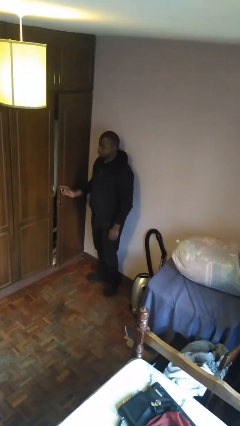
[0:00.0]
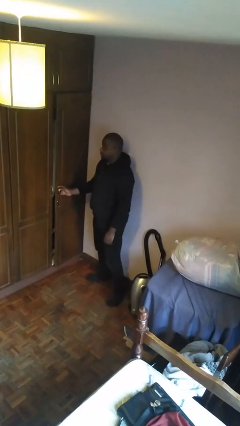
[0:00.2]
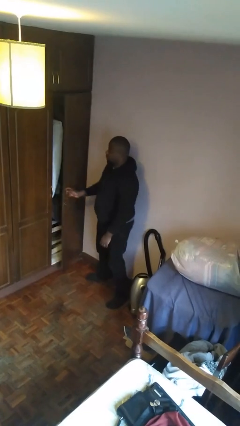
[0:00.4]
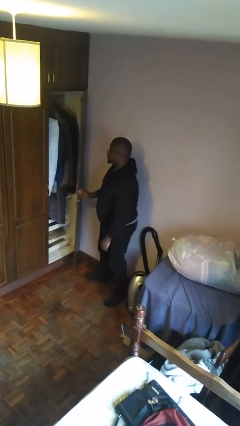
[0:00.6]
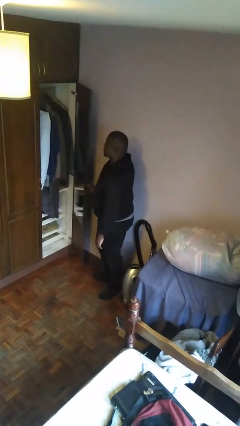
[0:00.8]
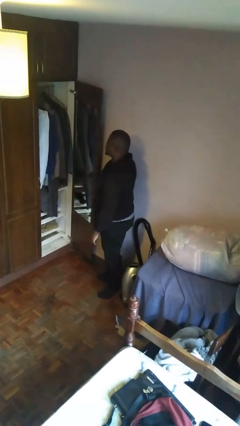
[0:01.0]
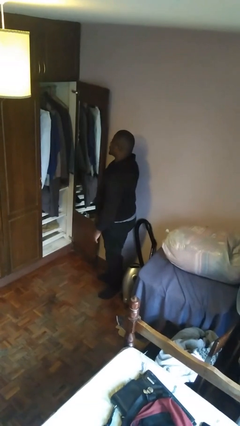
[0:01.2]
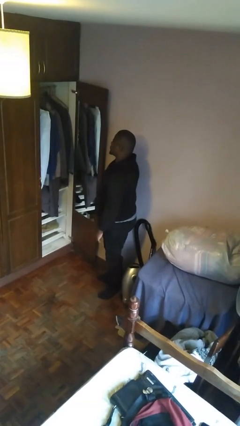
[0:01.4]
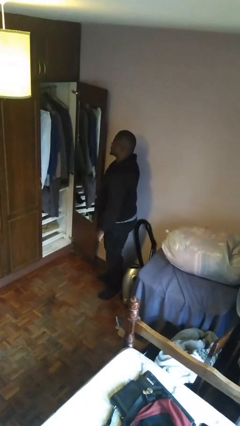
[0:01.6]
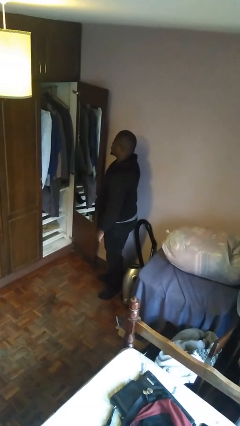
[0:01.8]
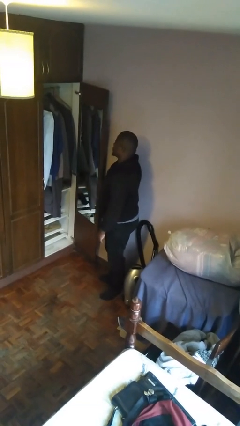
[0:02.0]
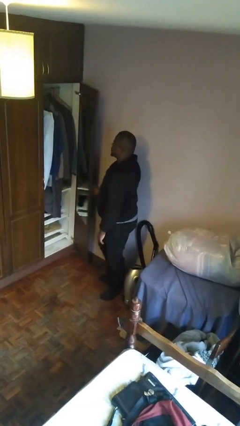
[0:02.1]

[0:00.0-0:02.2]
person opens closet door

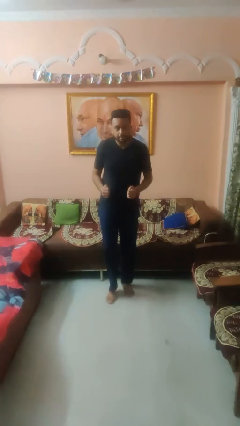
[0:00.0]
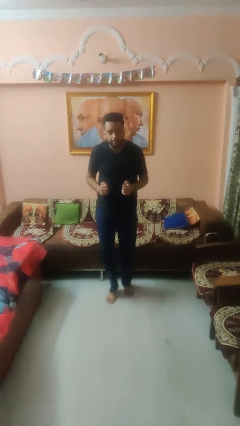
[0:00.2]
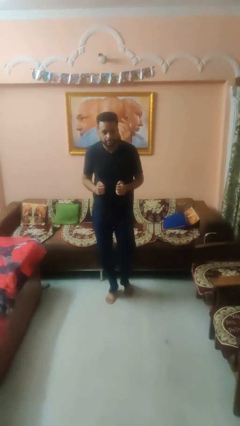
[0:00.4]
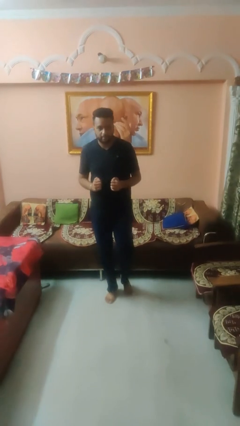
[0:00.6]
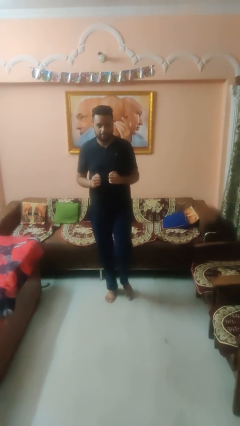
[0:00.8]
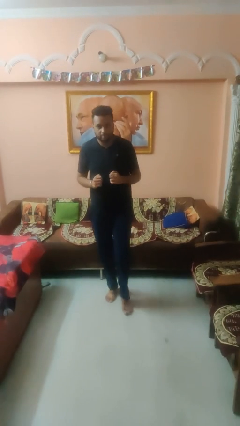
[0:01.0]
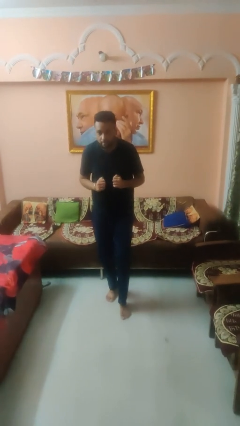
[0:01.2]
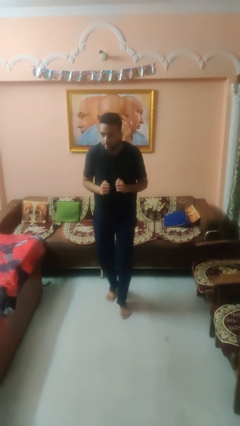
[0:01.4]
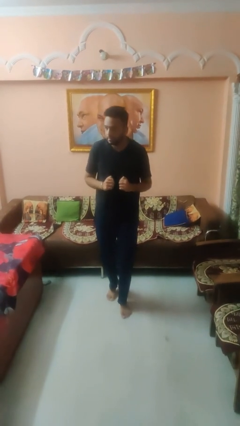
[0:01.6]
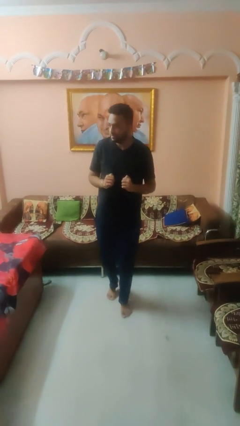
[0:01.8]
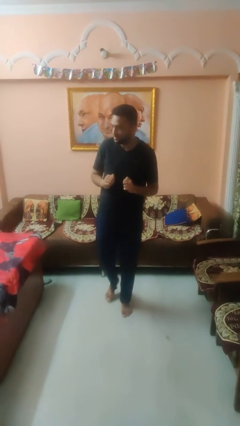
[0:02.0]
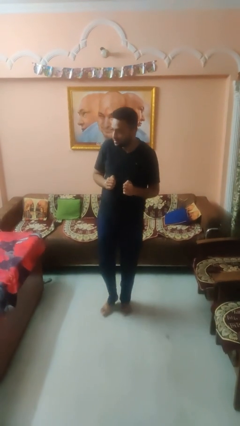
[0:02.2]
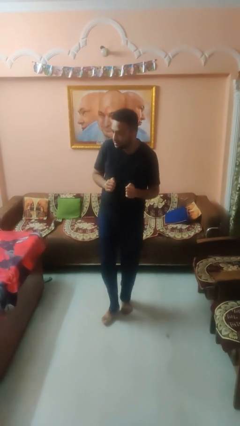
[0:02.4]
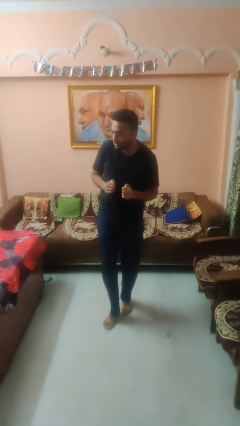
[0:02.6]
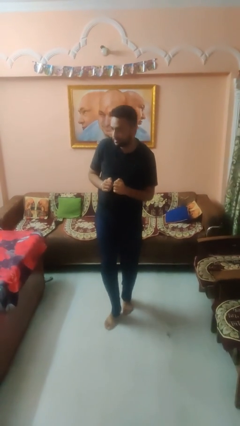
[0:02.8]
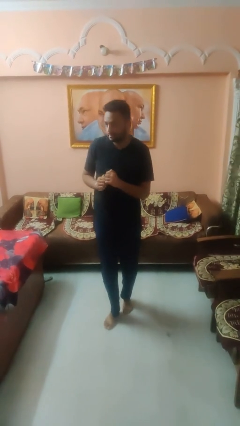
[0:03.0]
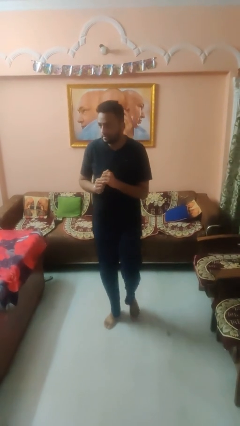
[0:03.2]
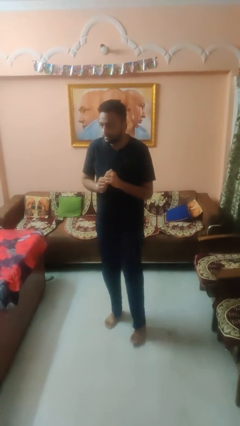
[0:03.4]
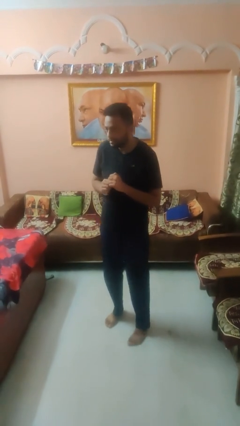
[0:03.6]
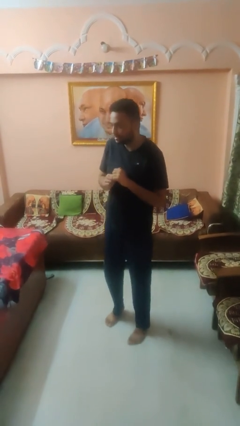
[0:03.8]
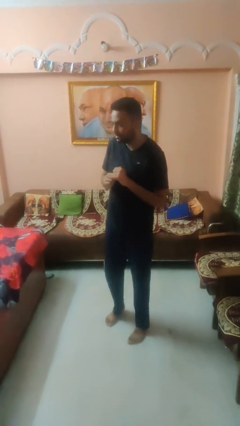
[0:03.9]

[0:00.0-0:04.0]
person walks tiptoe

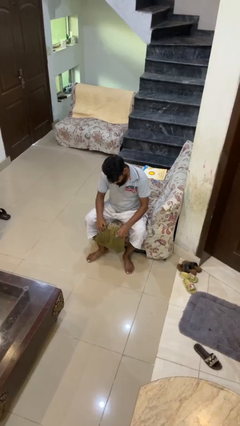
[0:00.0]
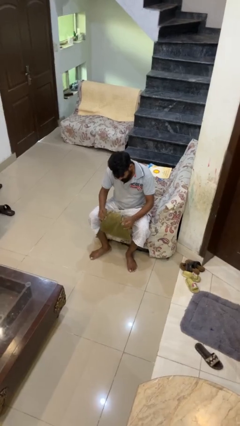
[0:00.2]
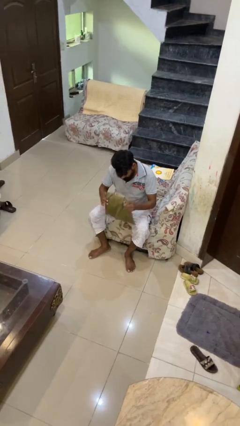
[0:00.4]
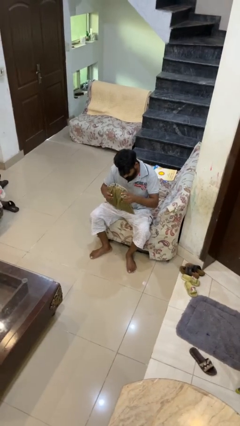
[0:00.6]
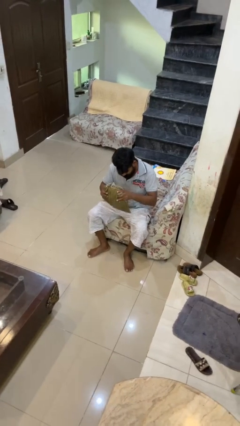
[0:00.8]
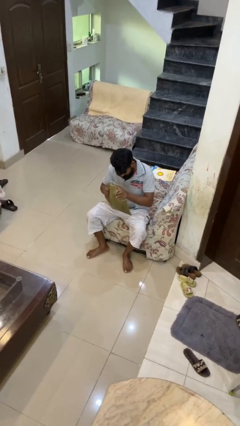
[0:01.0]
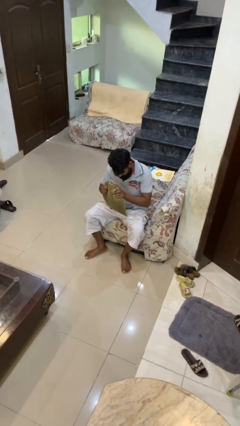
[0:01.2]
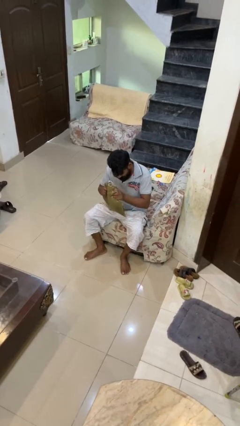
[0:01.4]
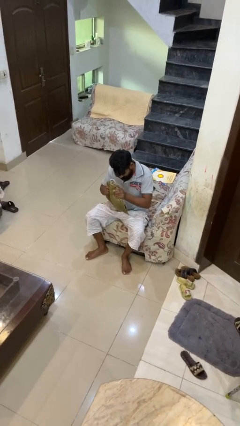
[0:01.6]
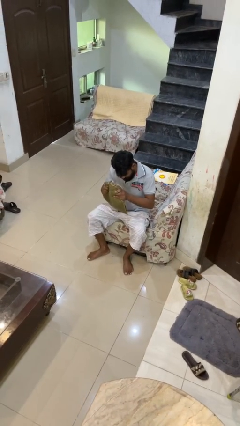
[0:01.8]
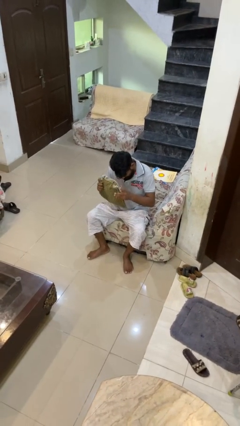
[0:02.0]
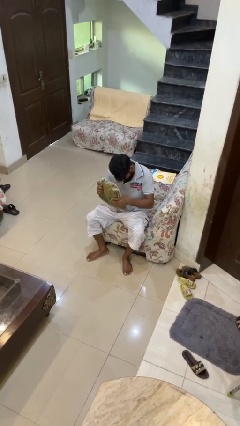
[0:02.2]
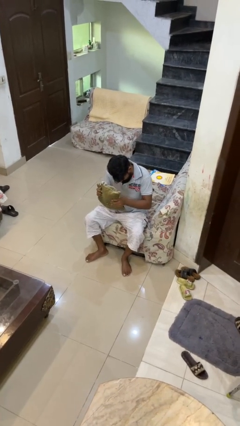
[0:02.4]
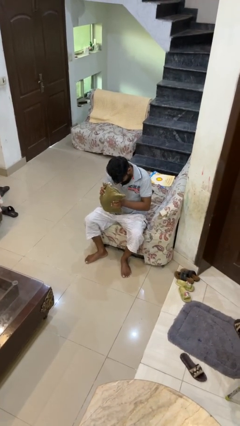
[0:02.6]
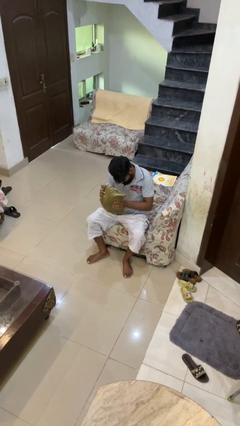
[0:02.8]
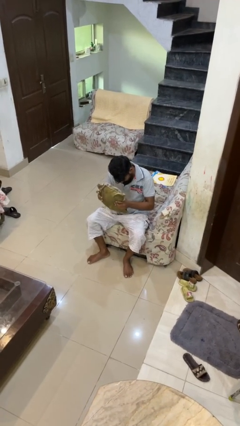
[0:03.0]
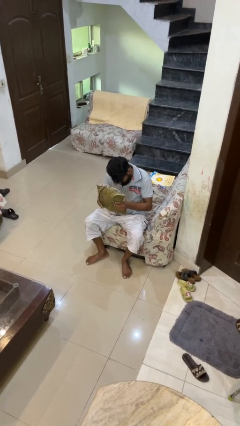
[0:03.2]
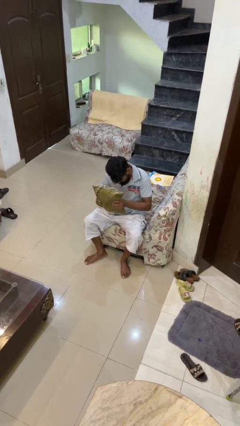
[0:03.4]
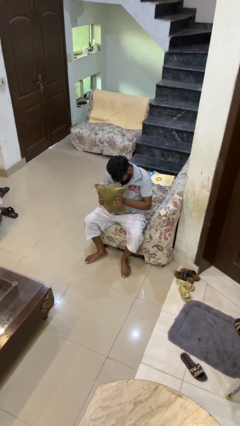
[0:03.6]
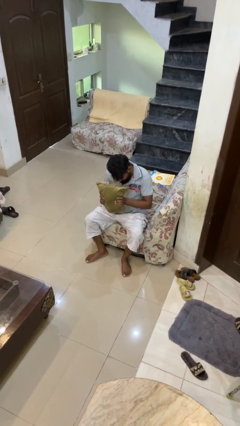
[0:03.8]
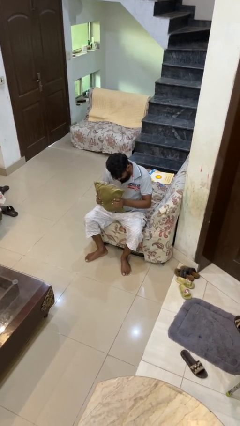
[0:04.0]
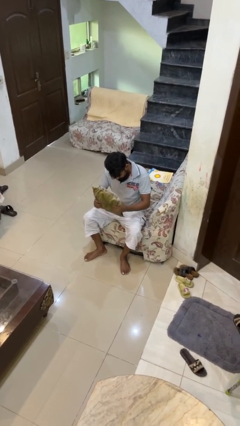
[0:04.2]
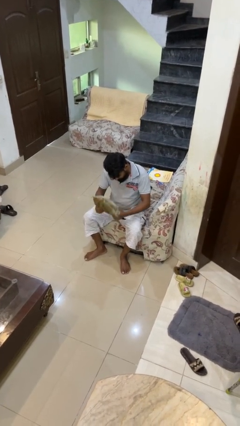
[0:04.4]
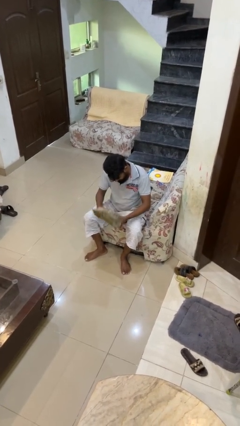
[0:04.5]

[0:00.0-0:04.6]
person squeezes object

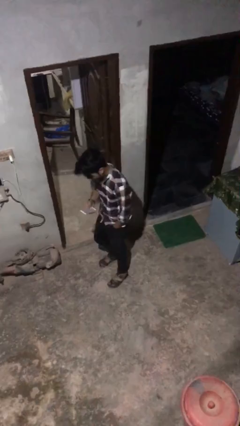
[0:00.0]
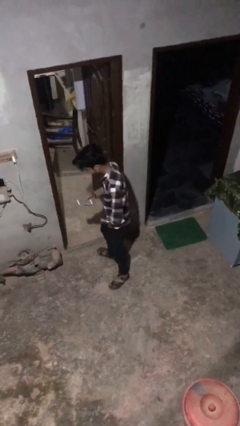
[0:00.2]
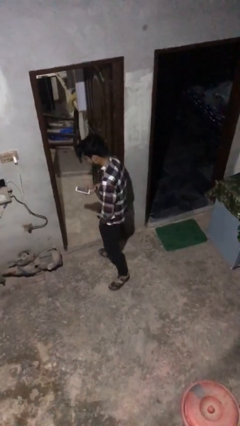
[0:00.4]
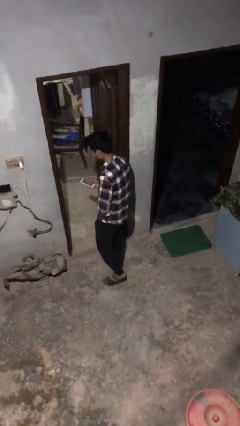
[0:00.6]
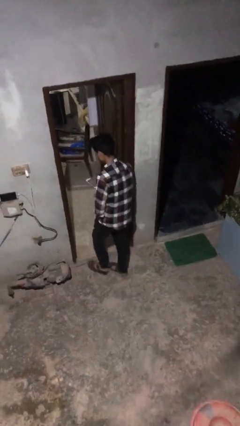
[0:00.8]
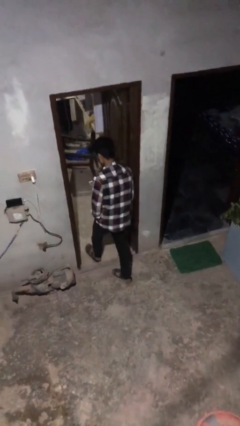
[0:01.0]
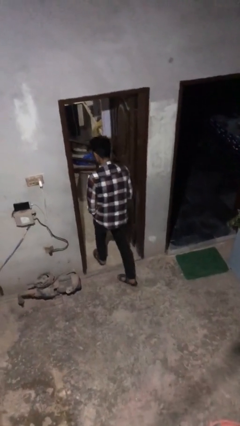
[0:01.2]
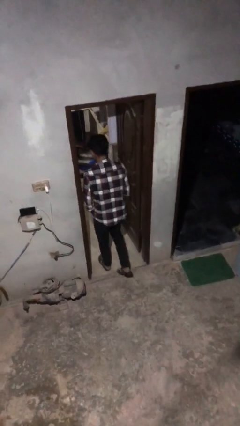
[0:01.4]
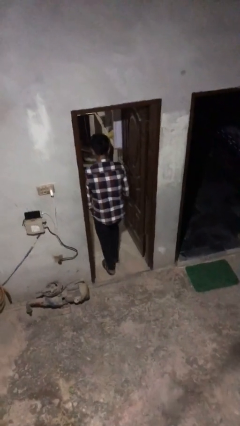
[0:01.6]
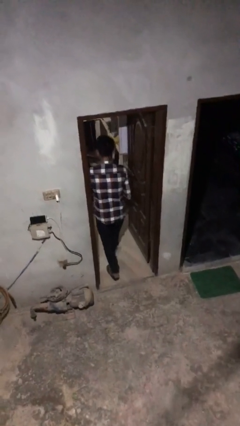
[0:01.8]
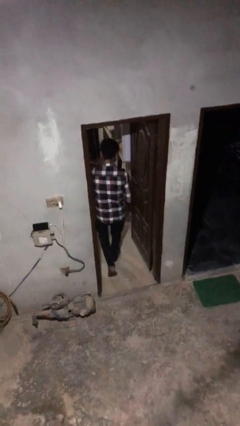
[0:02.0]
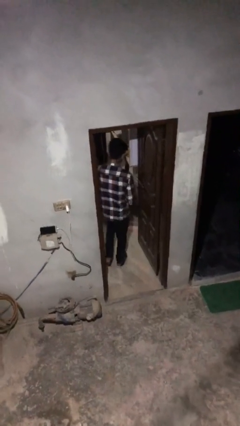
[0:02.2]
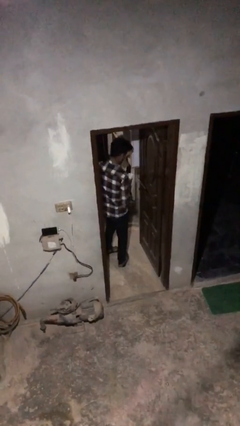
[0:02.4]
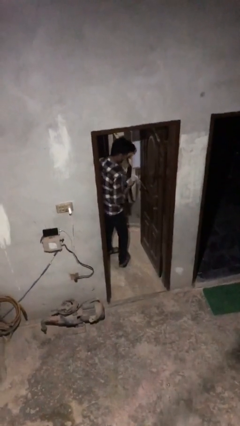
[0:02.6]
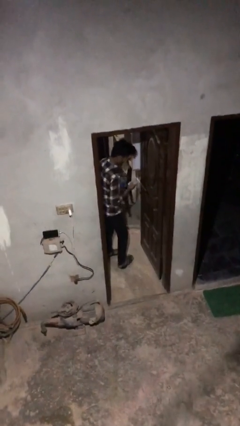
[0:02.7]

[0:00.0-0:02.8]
person exits scene through structure

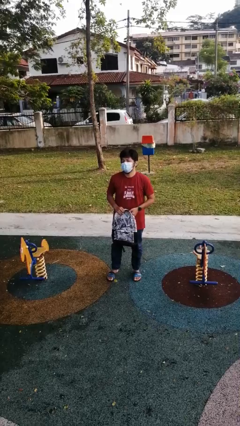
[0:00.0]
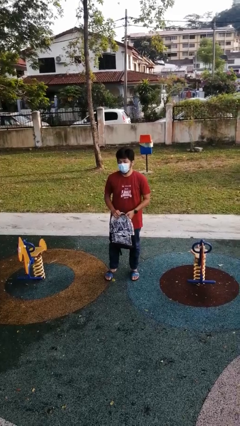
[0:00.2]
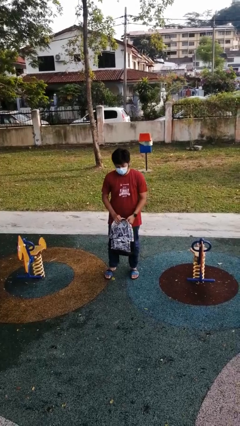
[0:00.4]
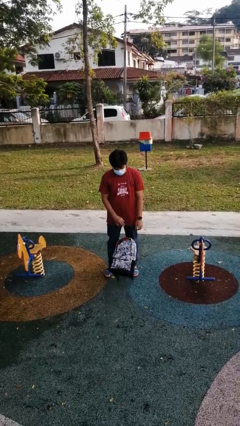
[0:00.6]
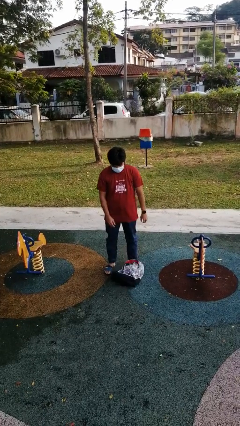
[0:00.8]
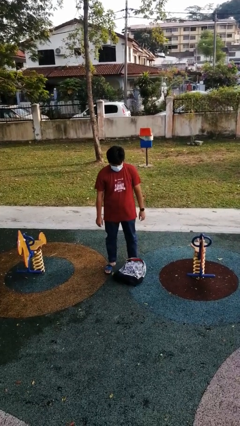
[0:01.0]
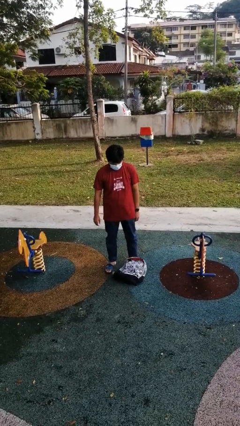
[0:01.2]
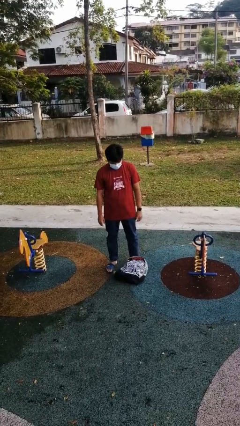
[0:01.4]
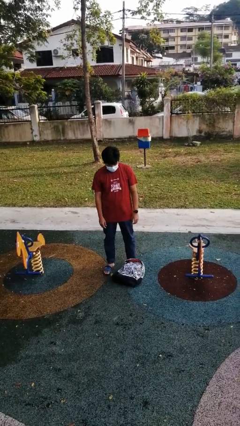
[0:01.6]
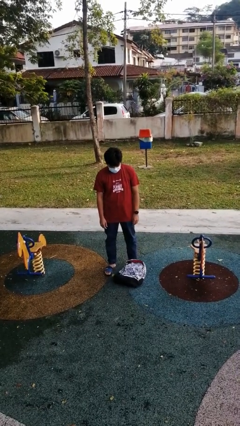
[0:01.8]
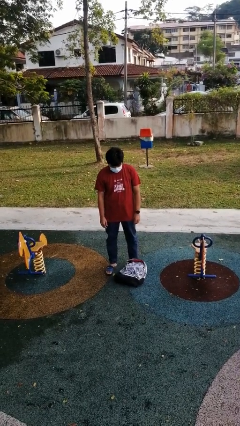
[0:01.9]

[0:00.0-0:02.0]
person drops object

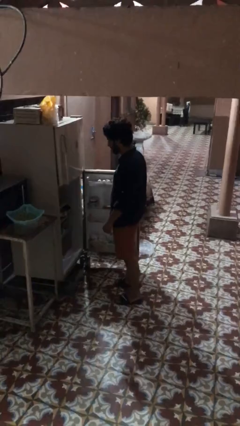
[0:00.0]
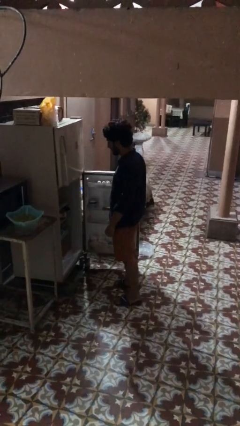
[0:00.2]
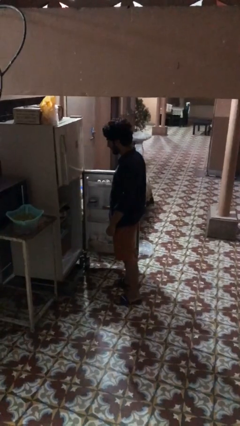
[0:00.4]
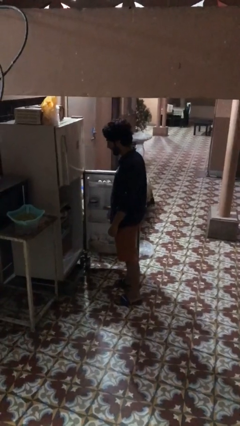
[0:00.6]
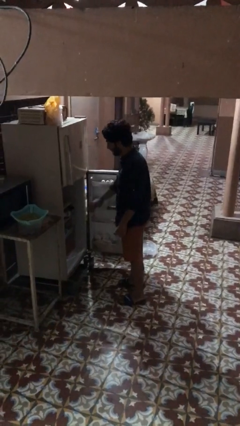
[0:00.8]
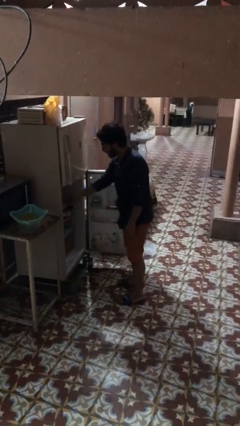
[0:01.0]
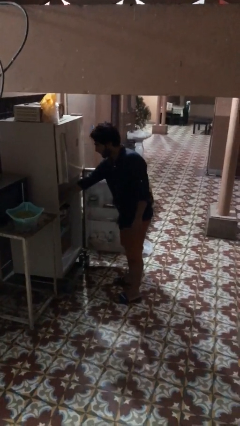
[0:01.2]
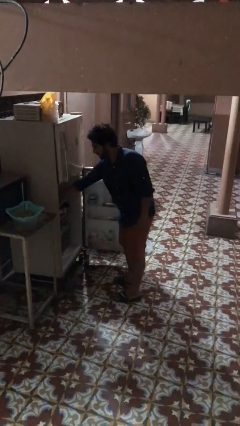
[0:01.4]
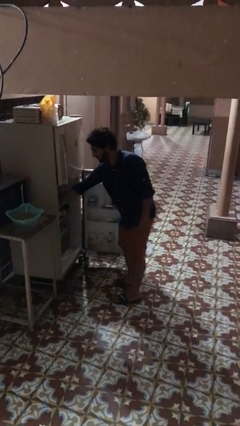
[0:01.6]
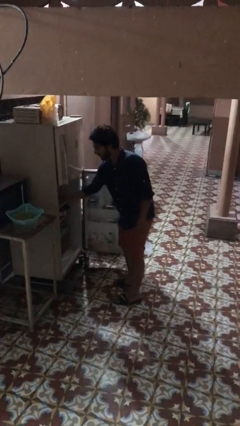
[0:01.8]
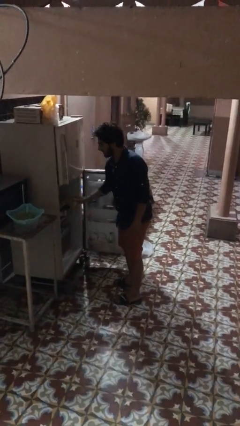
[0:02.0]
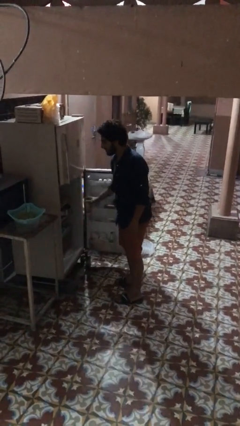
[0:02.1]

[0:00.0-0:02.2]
person takes object from refrigerator
